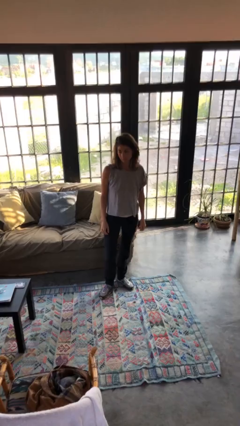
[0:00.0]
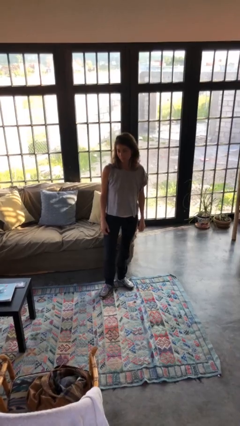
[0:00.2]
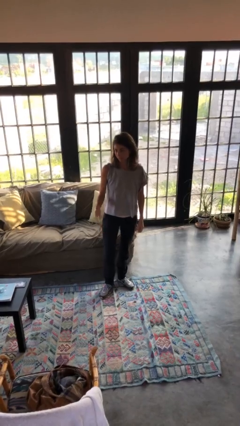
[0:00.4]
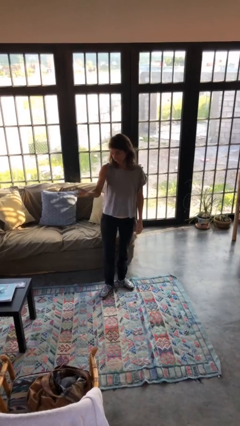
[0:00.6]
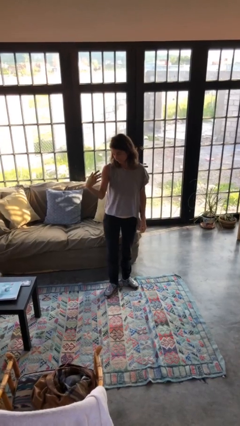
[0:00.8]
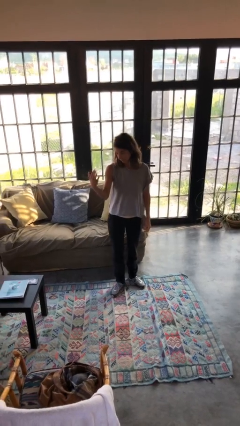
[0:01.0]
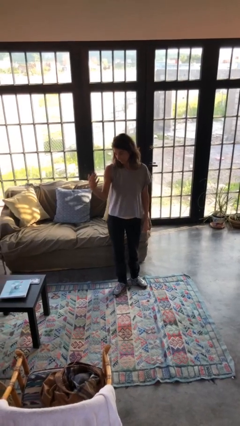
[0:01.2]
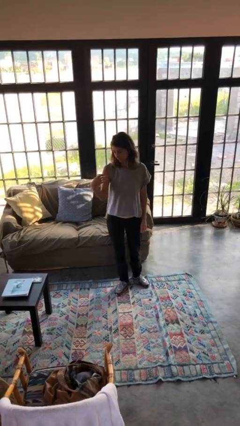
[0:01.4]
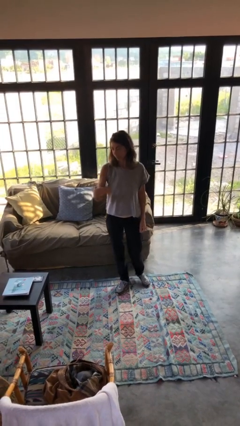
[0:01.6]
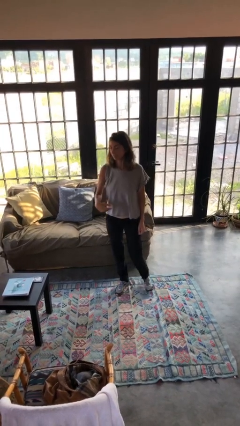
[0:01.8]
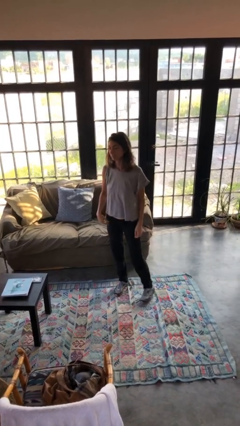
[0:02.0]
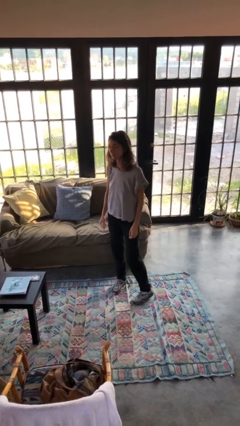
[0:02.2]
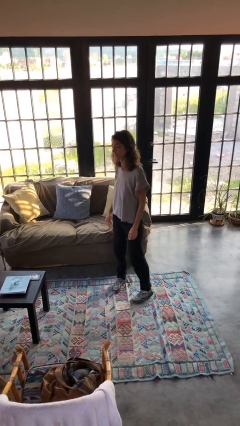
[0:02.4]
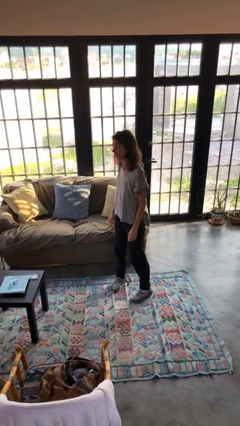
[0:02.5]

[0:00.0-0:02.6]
person gestures come here

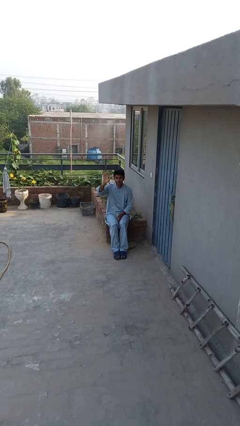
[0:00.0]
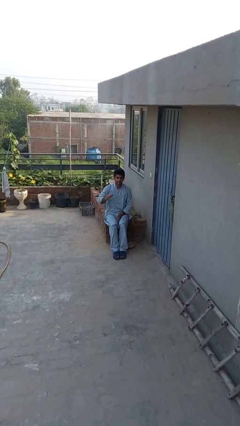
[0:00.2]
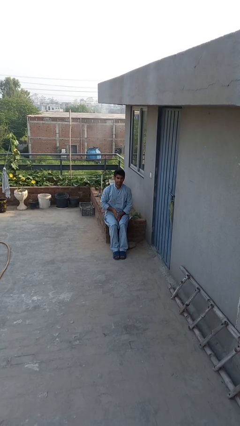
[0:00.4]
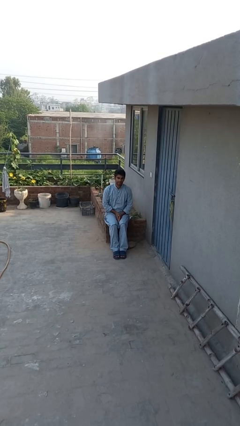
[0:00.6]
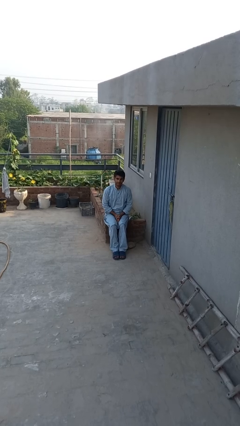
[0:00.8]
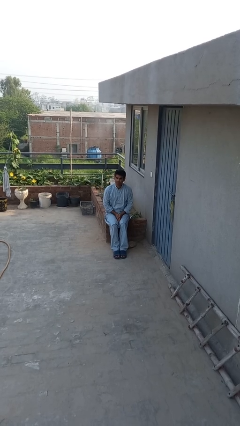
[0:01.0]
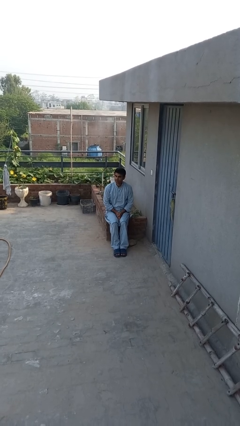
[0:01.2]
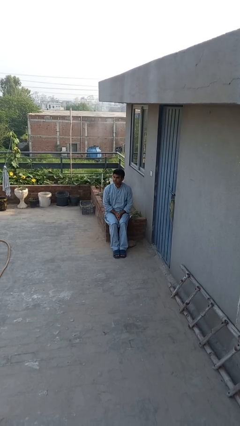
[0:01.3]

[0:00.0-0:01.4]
person gestures lower hand

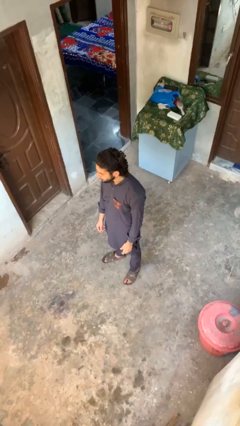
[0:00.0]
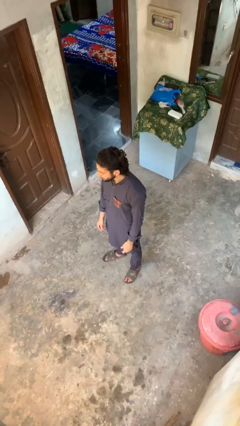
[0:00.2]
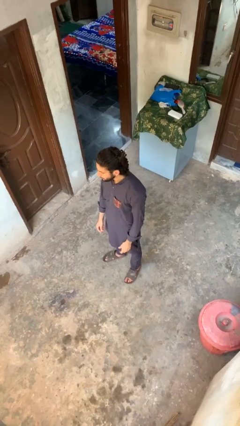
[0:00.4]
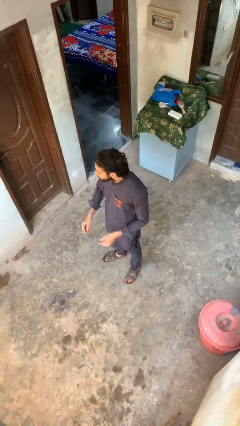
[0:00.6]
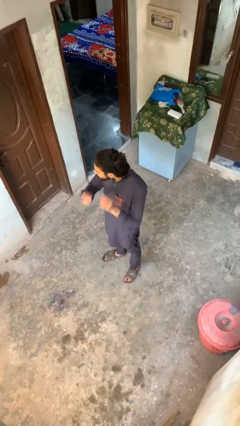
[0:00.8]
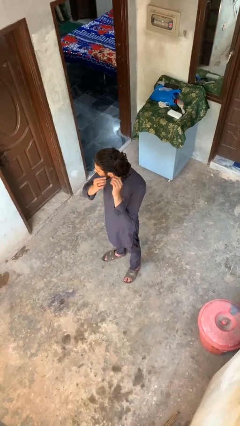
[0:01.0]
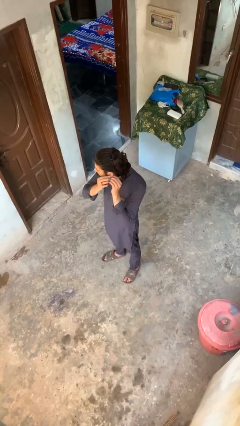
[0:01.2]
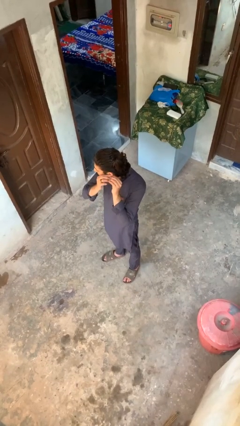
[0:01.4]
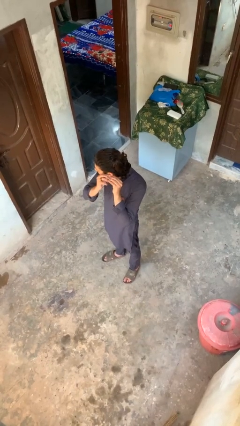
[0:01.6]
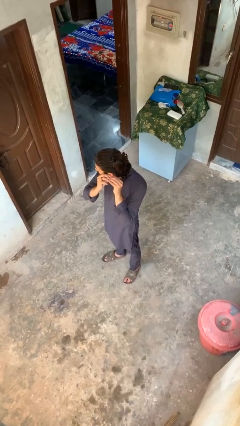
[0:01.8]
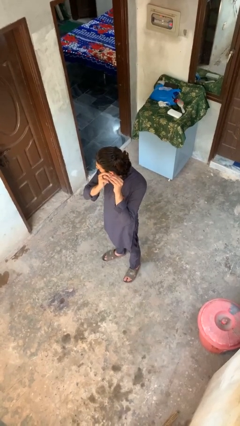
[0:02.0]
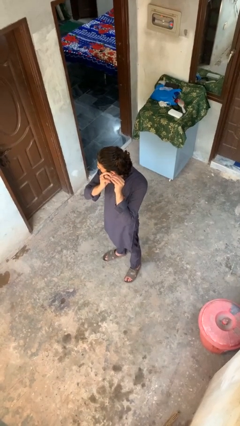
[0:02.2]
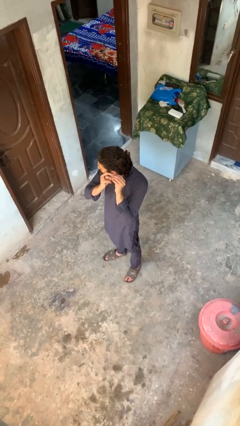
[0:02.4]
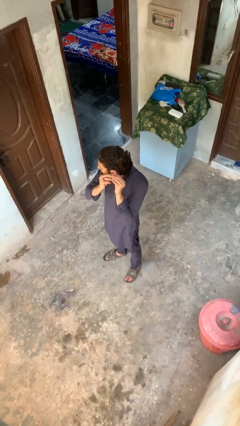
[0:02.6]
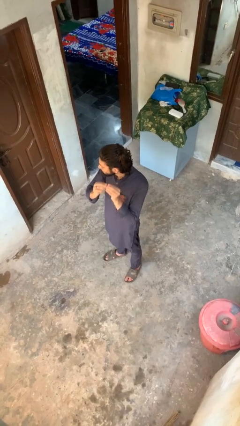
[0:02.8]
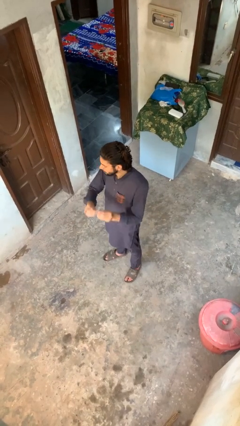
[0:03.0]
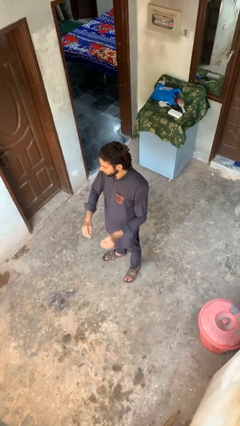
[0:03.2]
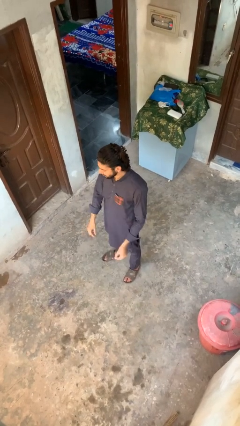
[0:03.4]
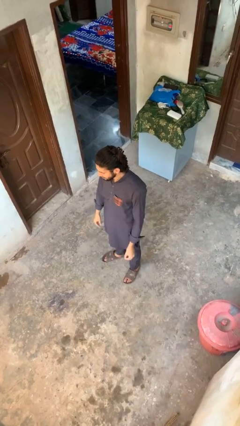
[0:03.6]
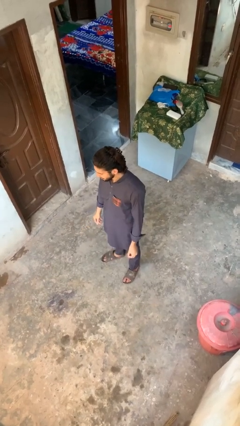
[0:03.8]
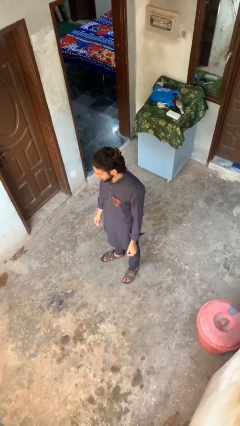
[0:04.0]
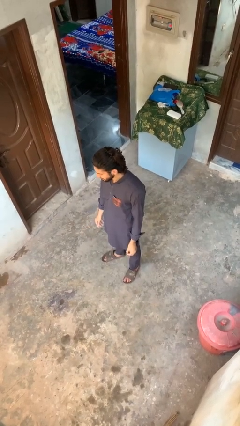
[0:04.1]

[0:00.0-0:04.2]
person takes off earrings

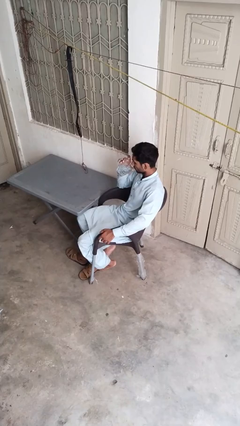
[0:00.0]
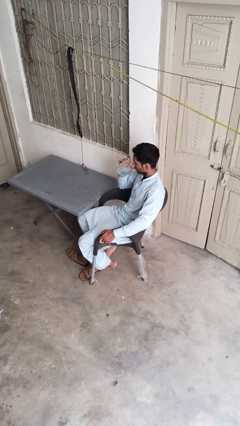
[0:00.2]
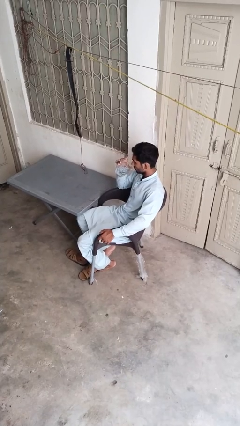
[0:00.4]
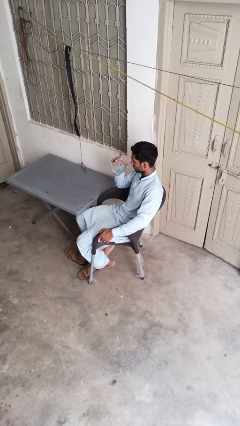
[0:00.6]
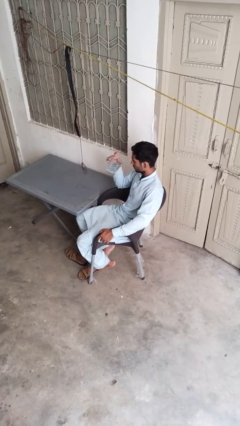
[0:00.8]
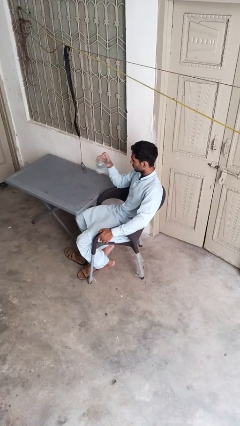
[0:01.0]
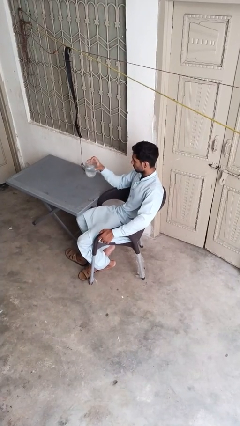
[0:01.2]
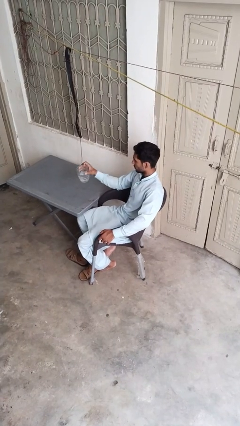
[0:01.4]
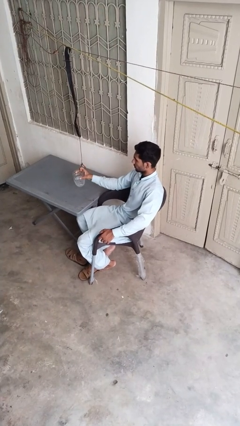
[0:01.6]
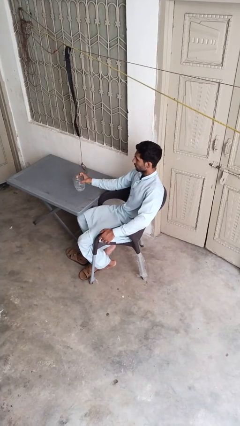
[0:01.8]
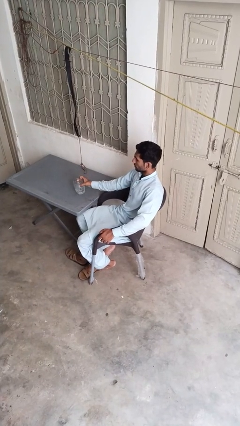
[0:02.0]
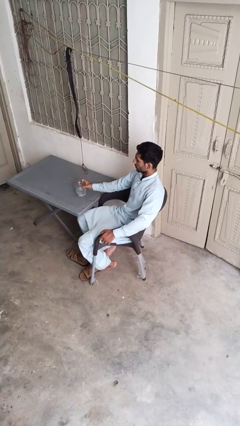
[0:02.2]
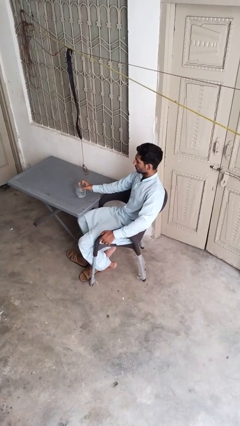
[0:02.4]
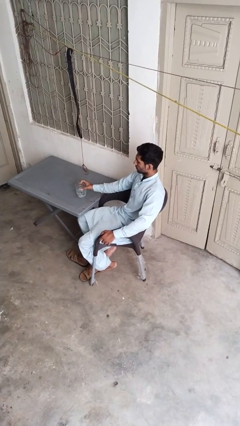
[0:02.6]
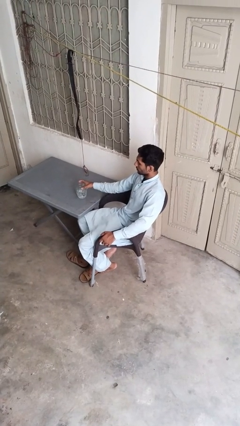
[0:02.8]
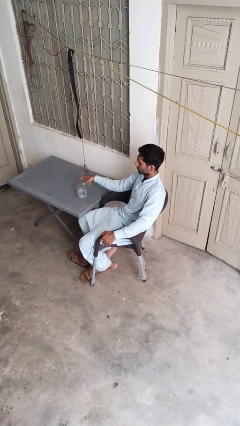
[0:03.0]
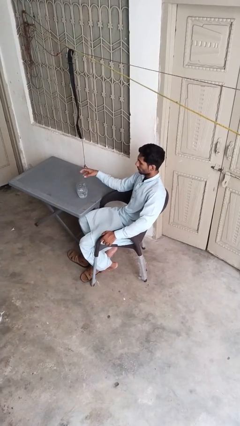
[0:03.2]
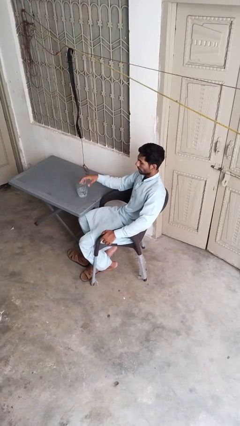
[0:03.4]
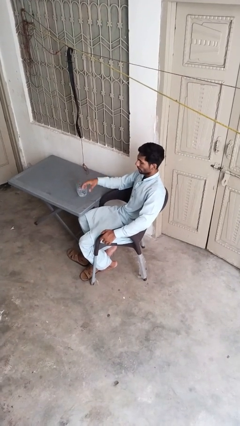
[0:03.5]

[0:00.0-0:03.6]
person puts down object on table

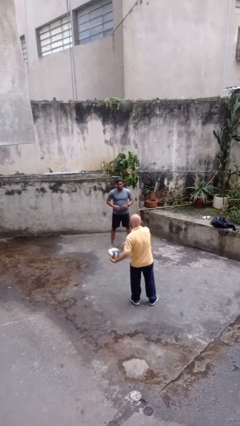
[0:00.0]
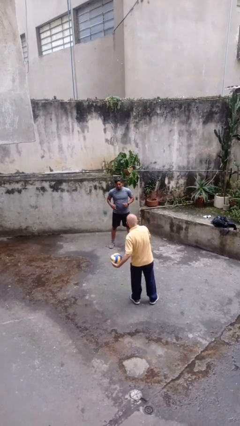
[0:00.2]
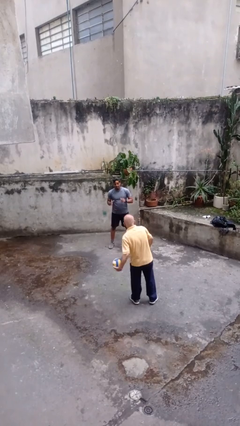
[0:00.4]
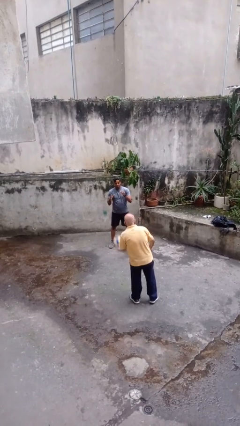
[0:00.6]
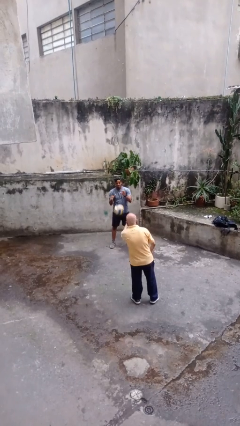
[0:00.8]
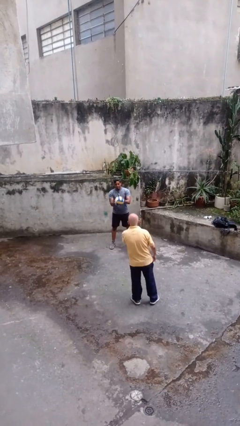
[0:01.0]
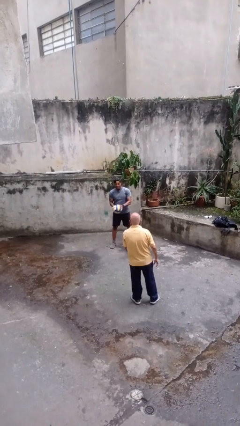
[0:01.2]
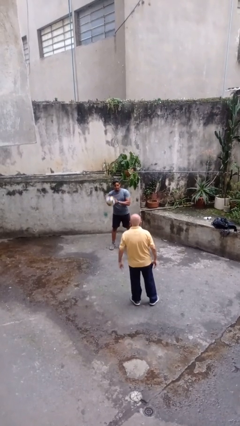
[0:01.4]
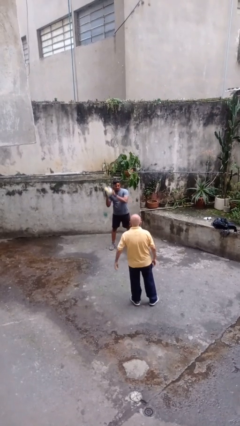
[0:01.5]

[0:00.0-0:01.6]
person catches object from person

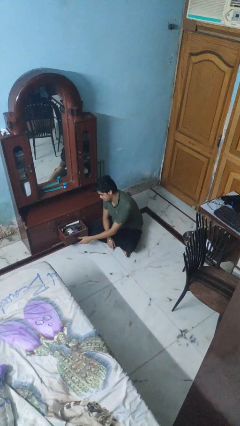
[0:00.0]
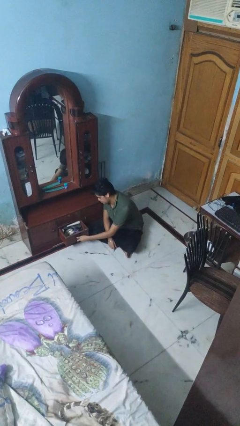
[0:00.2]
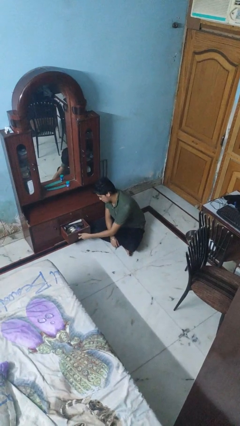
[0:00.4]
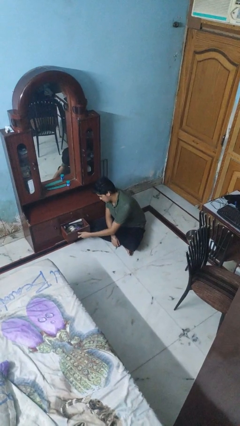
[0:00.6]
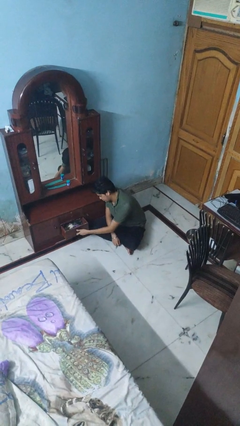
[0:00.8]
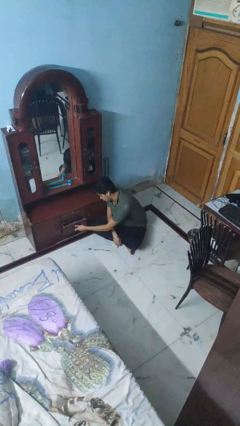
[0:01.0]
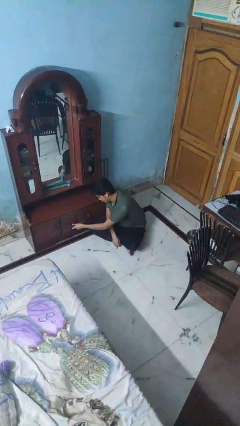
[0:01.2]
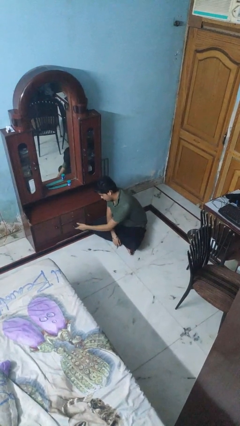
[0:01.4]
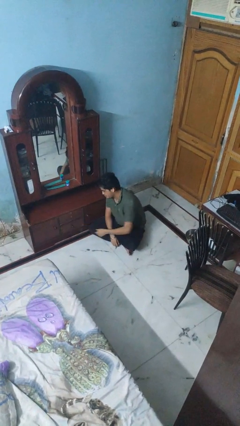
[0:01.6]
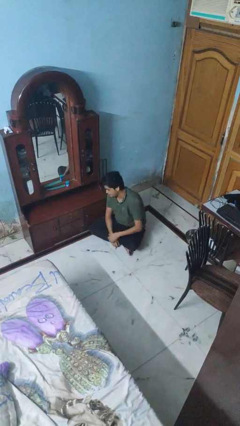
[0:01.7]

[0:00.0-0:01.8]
person closes dresser drawer

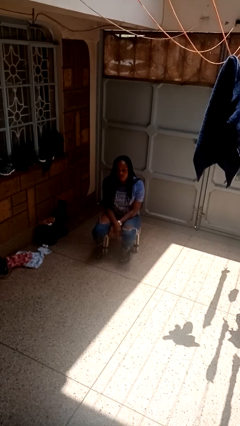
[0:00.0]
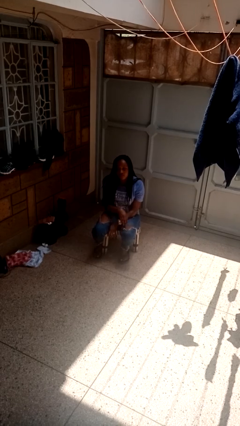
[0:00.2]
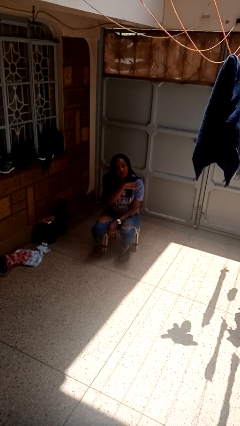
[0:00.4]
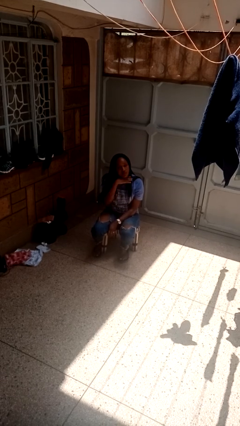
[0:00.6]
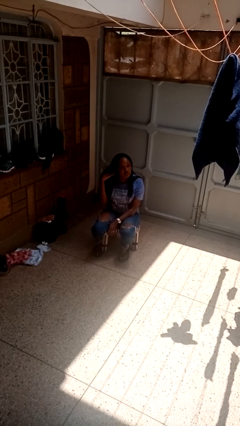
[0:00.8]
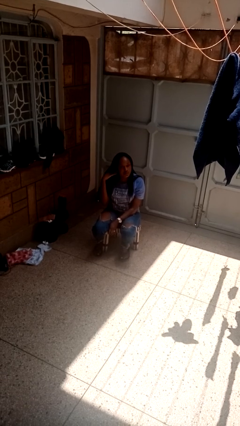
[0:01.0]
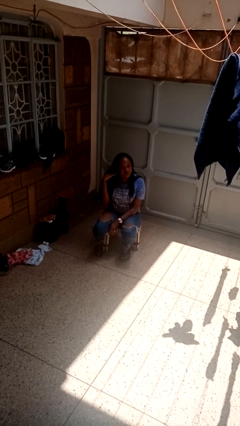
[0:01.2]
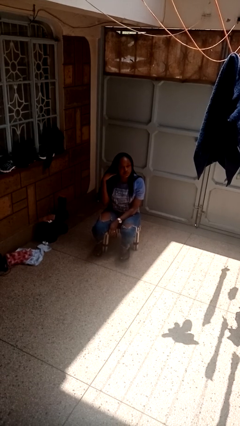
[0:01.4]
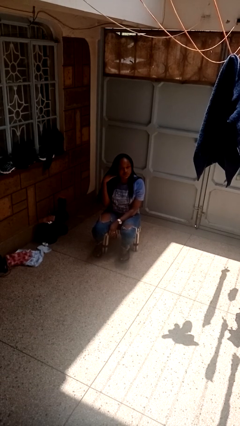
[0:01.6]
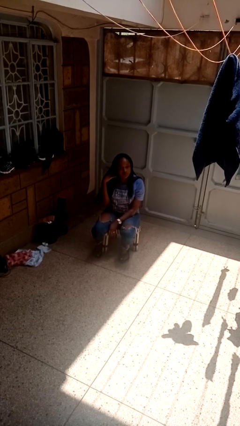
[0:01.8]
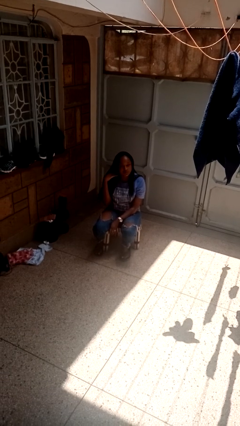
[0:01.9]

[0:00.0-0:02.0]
person gestures cut
